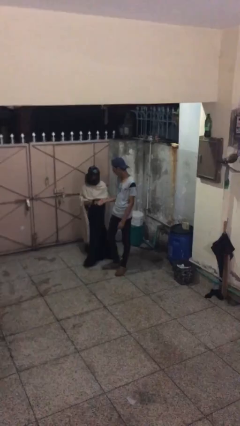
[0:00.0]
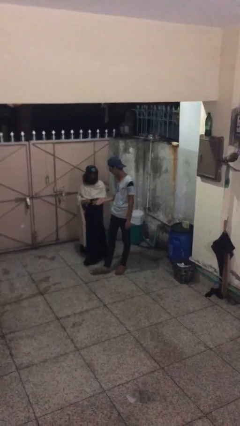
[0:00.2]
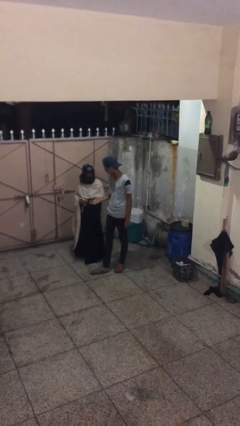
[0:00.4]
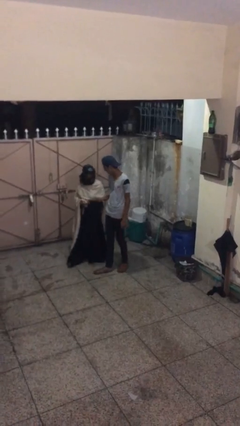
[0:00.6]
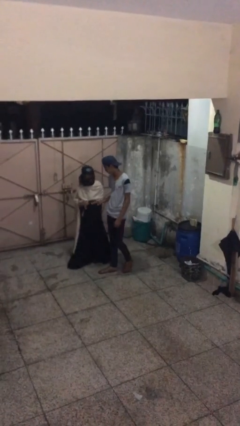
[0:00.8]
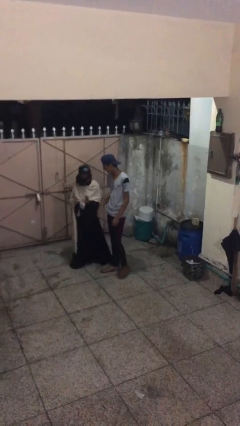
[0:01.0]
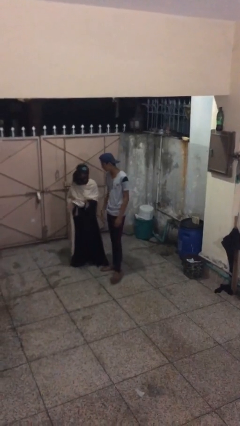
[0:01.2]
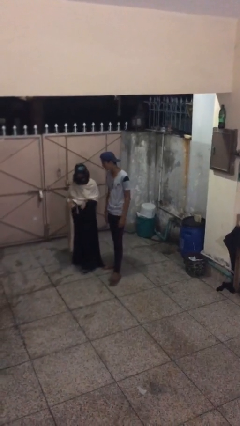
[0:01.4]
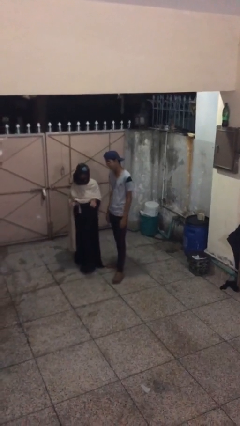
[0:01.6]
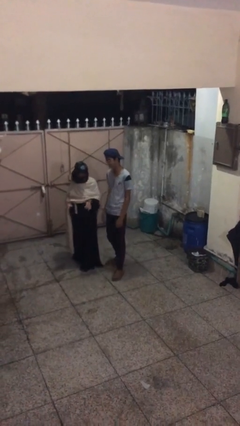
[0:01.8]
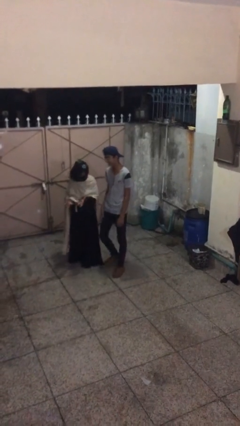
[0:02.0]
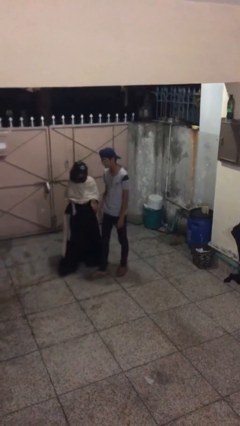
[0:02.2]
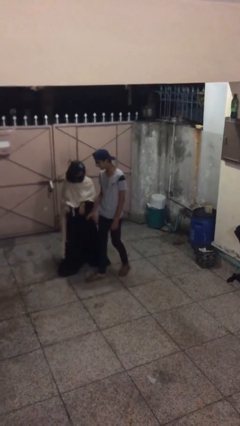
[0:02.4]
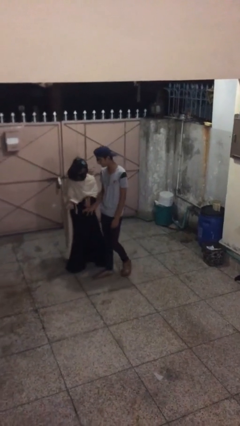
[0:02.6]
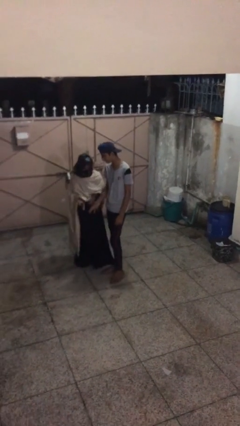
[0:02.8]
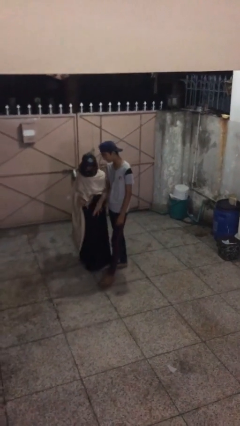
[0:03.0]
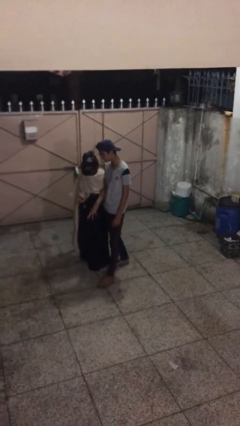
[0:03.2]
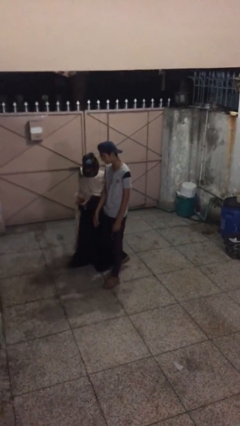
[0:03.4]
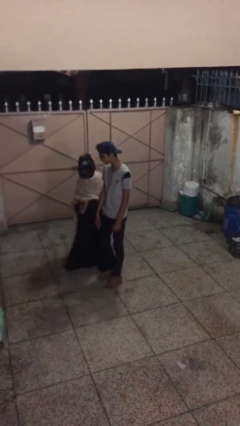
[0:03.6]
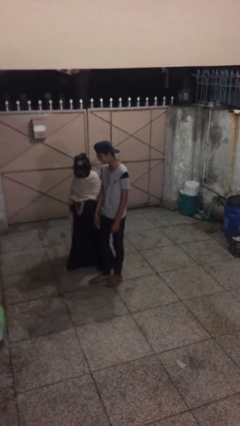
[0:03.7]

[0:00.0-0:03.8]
person talks to person

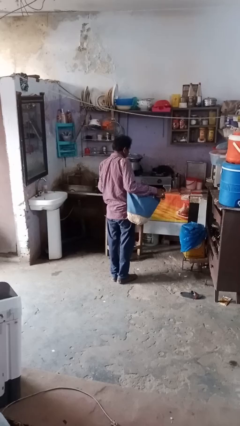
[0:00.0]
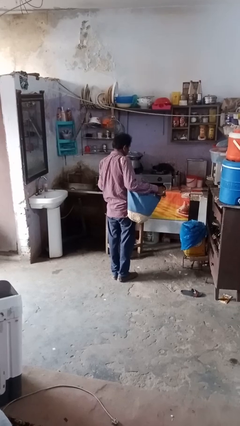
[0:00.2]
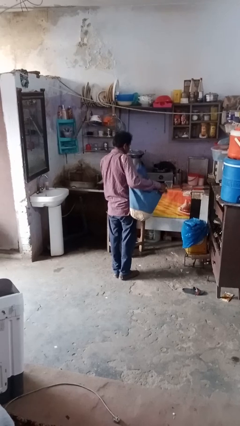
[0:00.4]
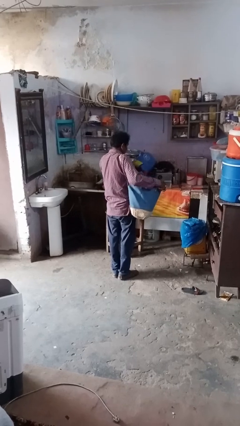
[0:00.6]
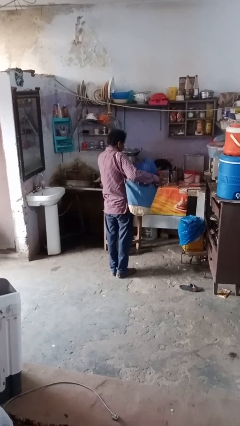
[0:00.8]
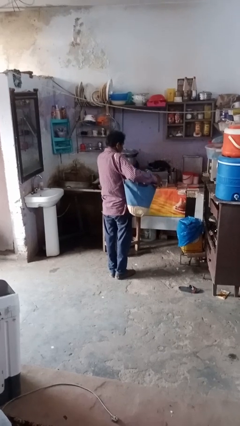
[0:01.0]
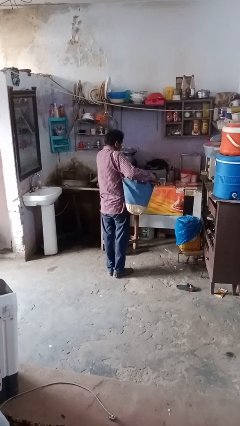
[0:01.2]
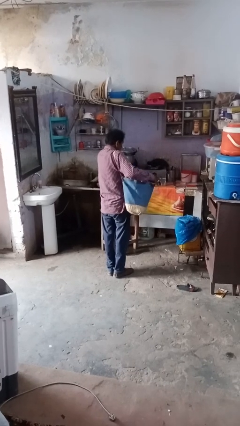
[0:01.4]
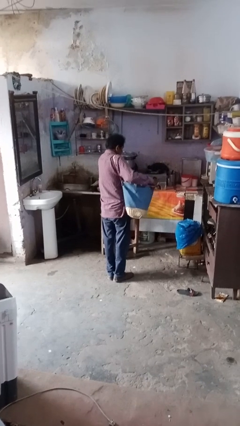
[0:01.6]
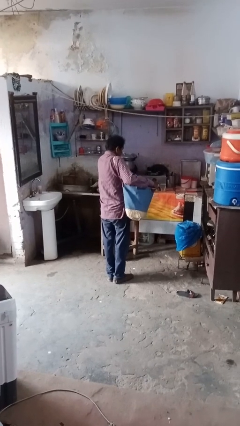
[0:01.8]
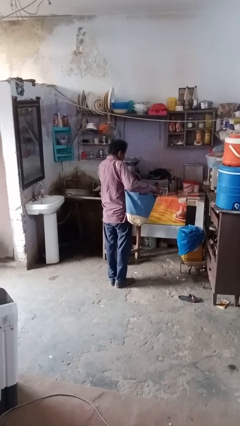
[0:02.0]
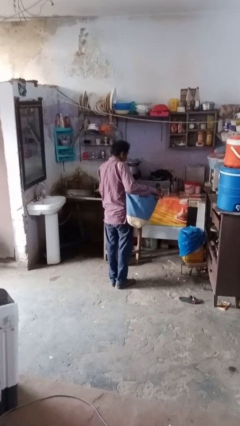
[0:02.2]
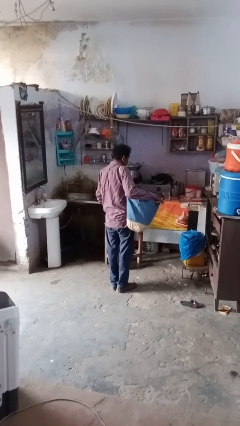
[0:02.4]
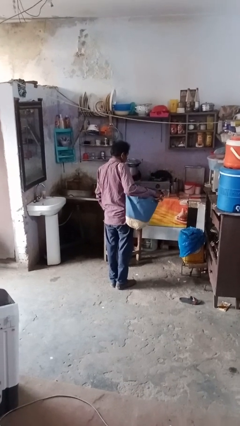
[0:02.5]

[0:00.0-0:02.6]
person puts object into bag

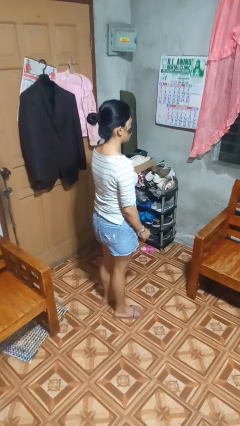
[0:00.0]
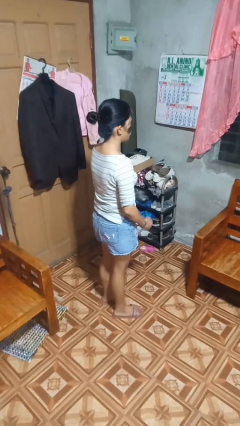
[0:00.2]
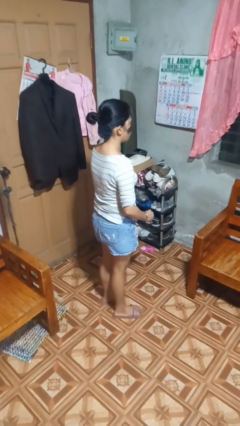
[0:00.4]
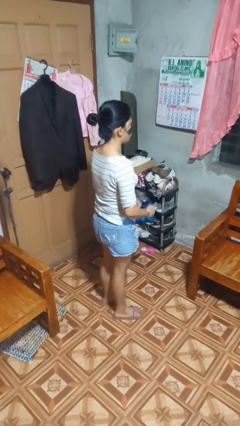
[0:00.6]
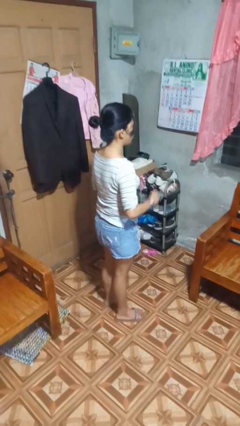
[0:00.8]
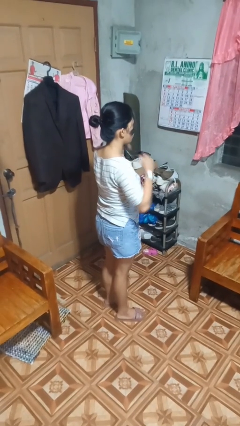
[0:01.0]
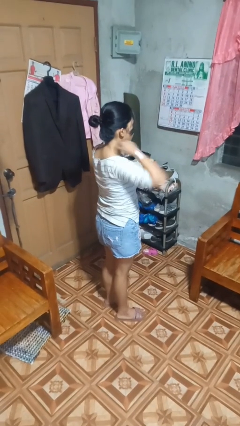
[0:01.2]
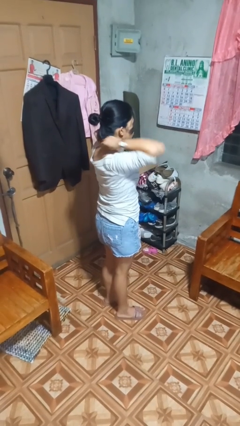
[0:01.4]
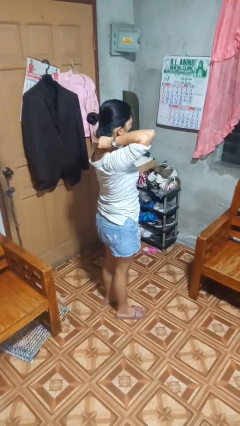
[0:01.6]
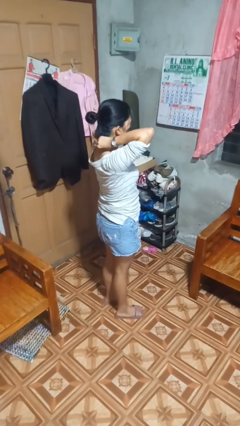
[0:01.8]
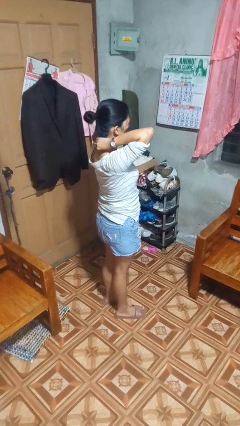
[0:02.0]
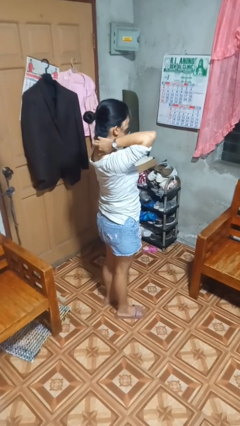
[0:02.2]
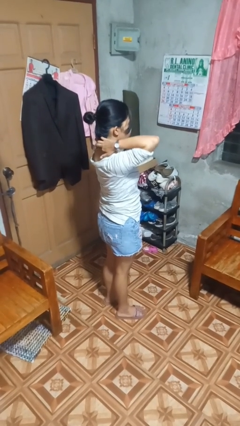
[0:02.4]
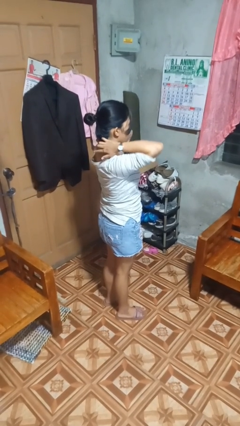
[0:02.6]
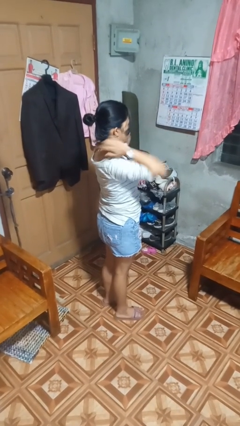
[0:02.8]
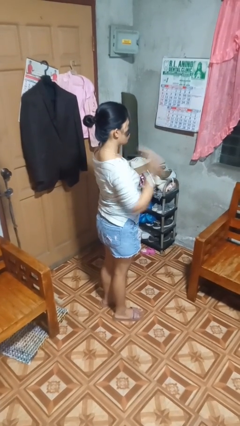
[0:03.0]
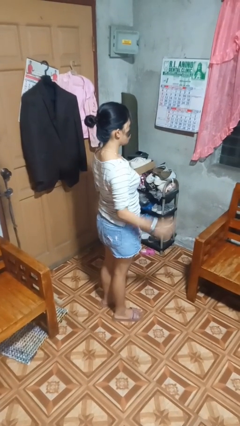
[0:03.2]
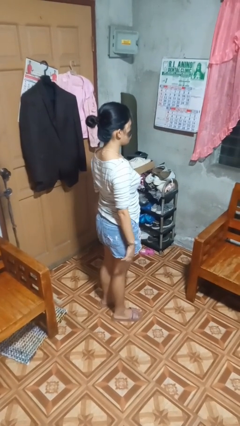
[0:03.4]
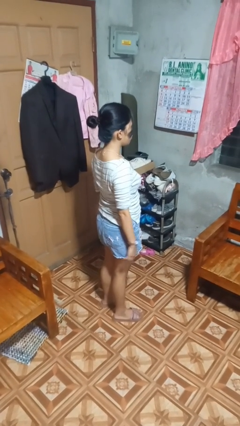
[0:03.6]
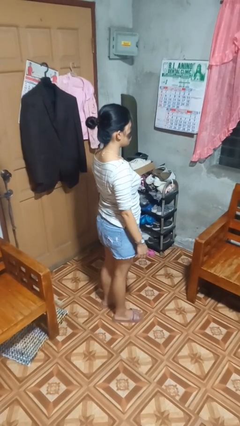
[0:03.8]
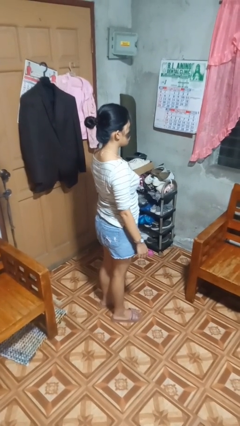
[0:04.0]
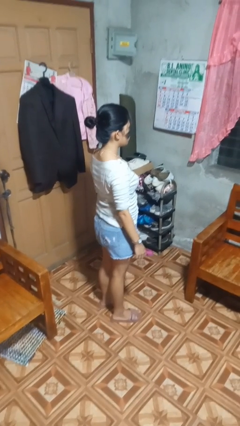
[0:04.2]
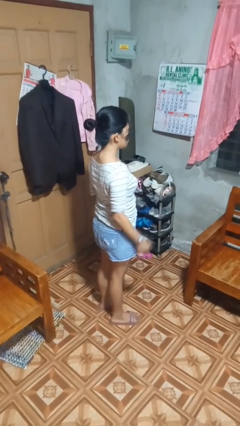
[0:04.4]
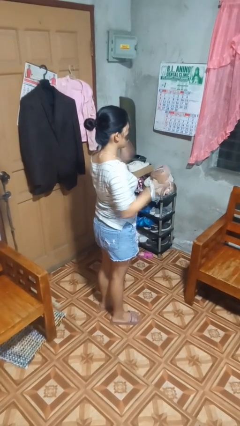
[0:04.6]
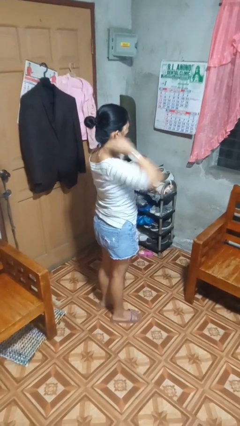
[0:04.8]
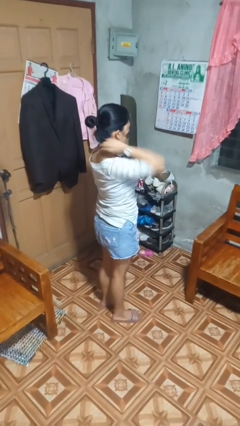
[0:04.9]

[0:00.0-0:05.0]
person puts on necklace

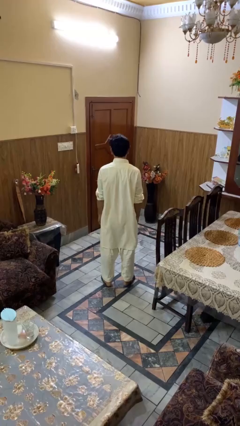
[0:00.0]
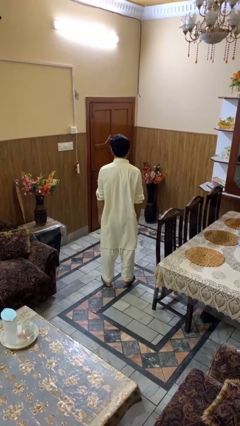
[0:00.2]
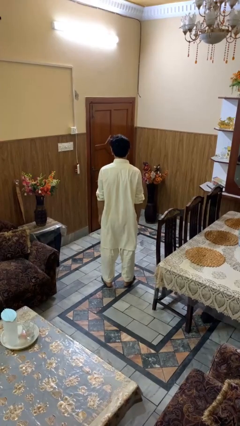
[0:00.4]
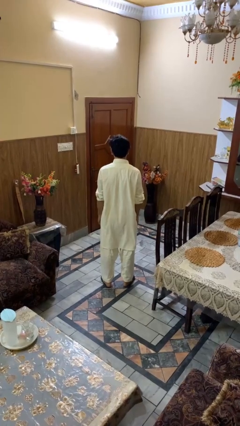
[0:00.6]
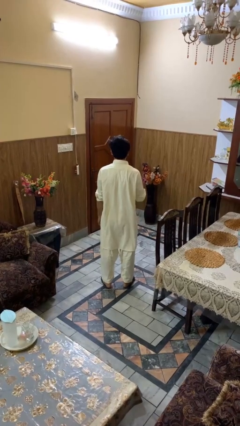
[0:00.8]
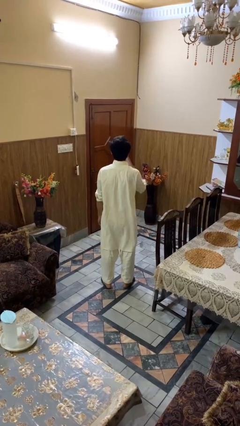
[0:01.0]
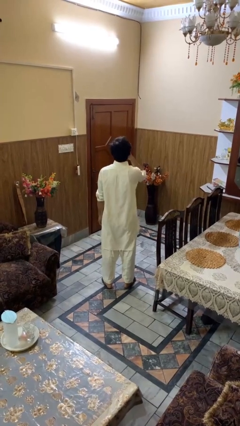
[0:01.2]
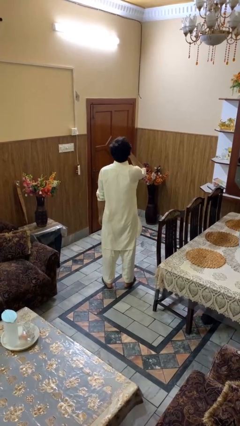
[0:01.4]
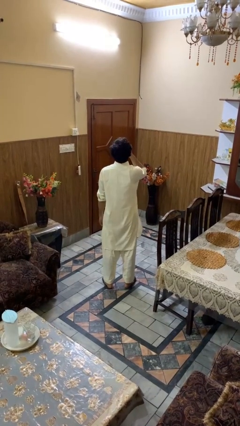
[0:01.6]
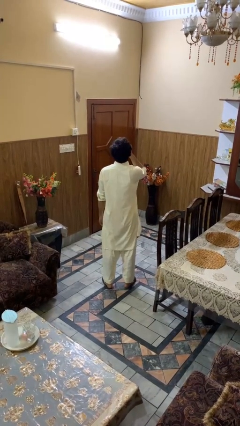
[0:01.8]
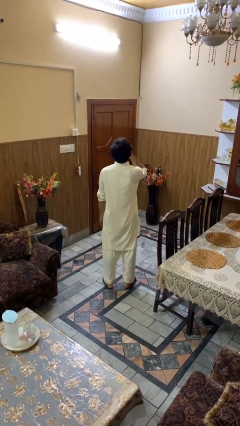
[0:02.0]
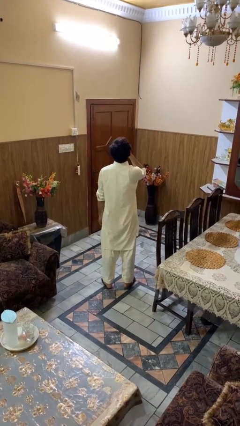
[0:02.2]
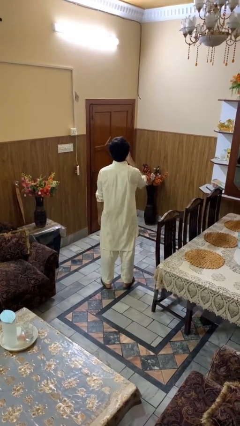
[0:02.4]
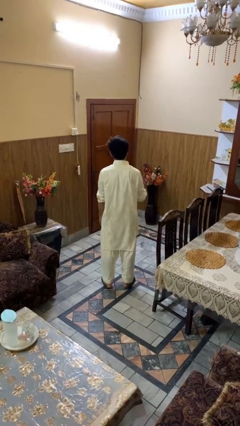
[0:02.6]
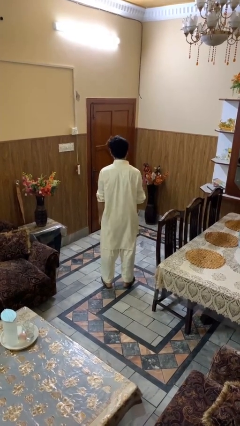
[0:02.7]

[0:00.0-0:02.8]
person yawns

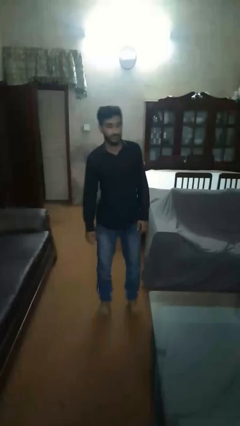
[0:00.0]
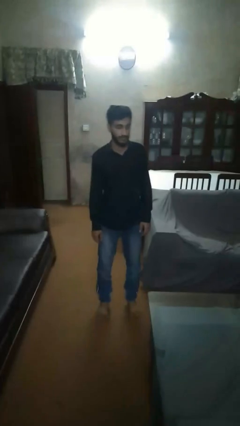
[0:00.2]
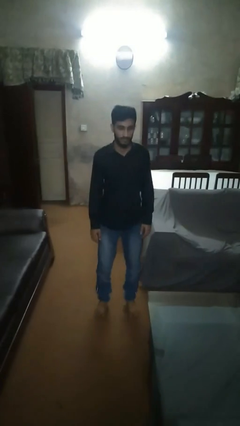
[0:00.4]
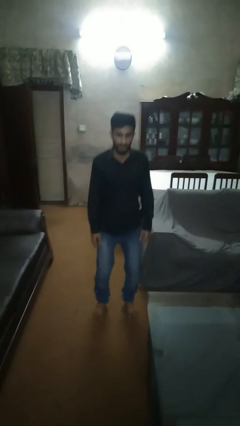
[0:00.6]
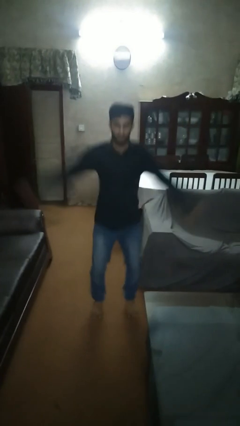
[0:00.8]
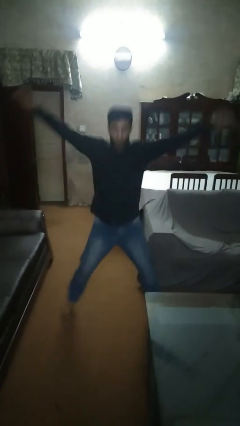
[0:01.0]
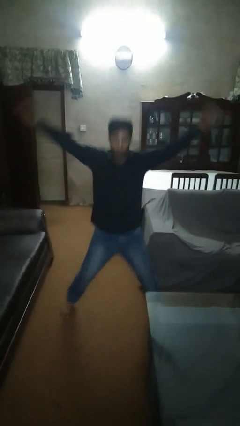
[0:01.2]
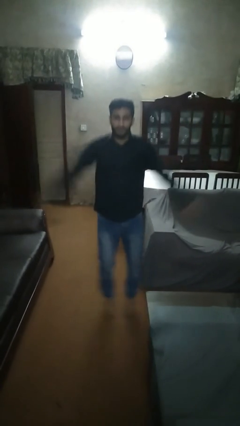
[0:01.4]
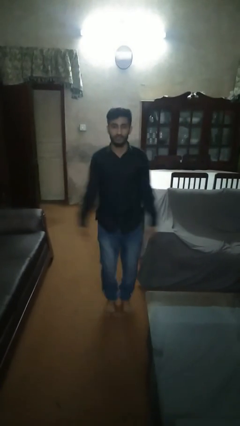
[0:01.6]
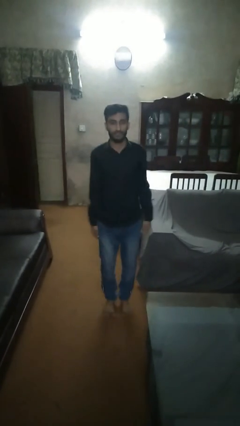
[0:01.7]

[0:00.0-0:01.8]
person exercises with jumping jacks

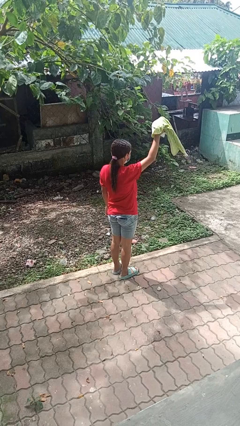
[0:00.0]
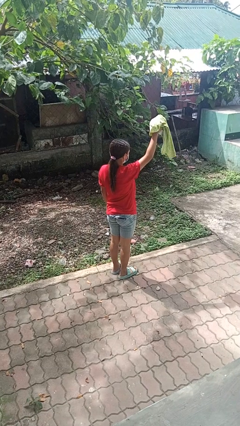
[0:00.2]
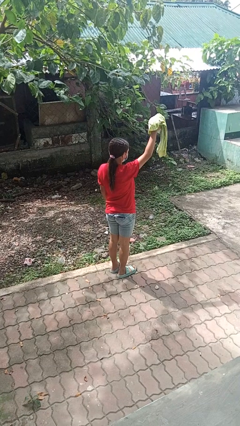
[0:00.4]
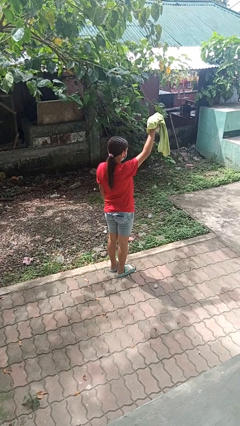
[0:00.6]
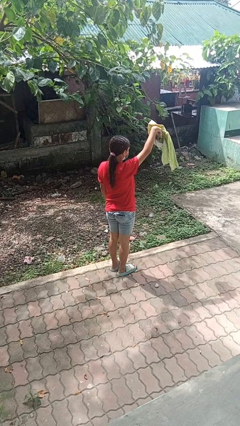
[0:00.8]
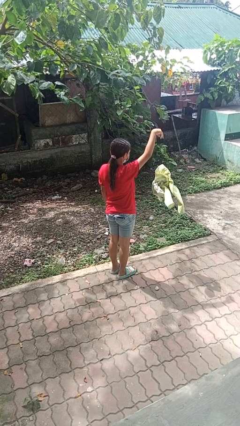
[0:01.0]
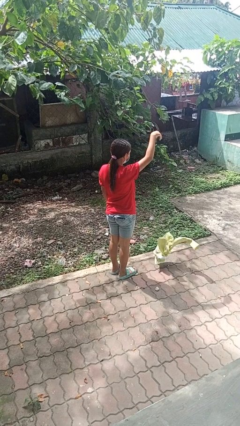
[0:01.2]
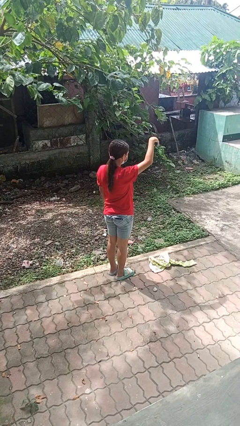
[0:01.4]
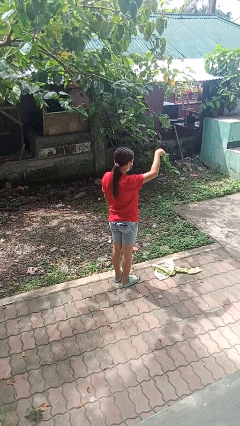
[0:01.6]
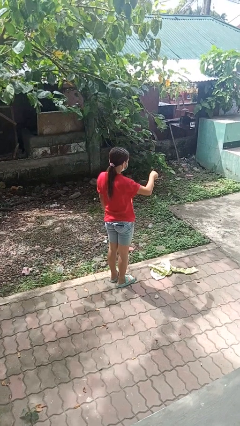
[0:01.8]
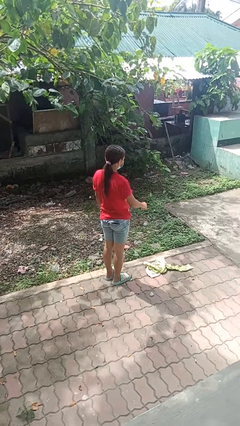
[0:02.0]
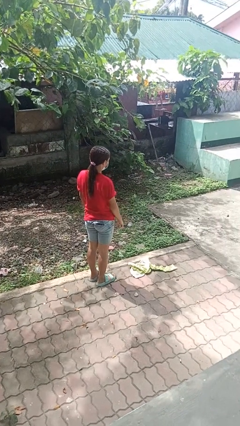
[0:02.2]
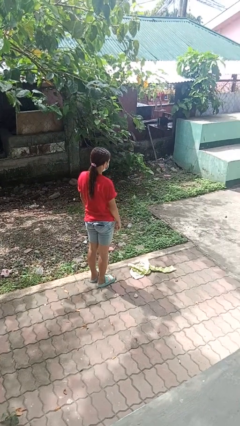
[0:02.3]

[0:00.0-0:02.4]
person drops object
